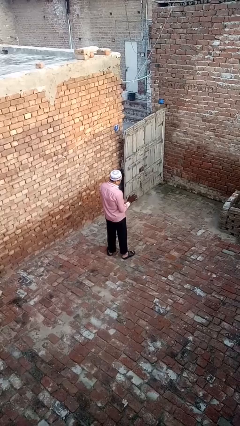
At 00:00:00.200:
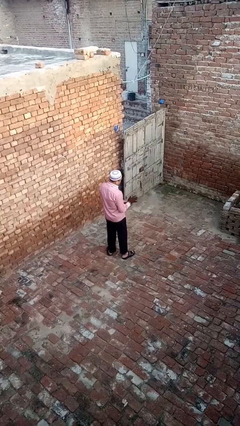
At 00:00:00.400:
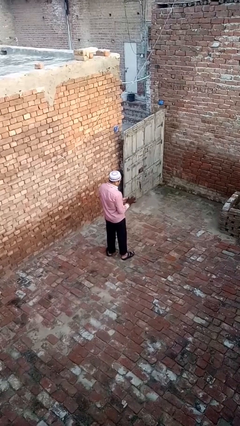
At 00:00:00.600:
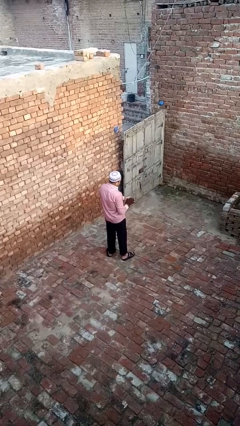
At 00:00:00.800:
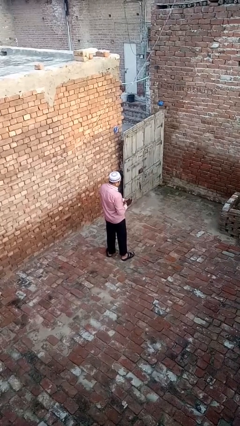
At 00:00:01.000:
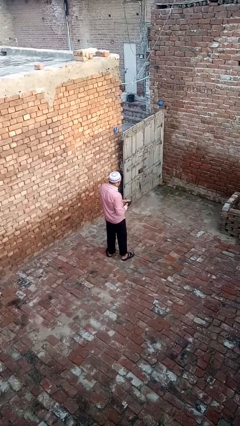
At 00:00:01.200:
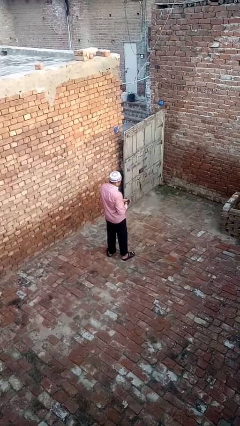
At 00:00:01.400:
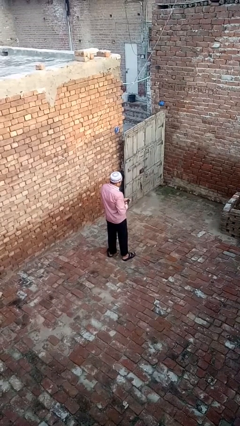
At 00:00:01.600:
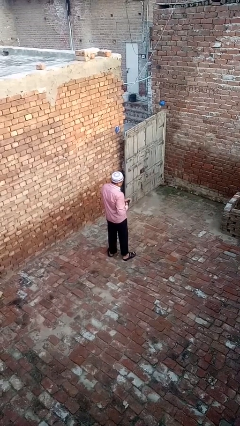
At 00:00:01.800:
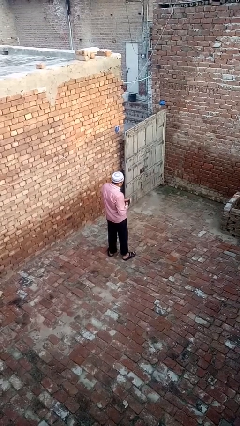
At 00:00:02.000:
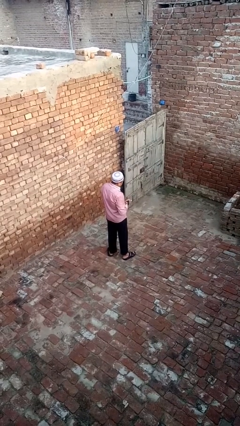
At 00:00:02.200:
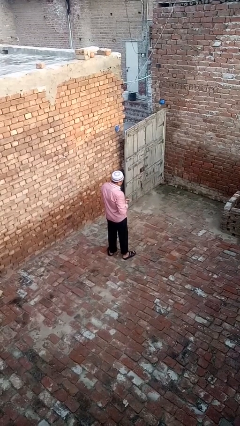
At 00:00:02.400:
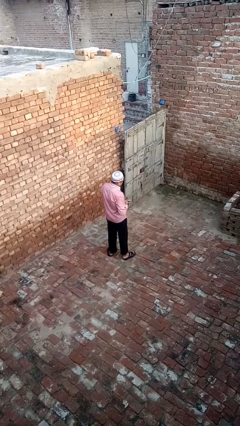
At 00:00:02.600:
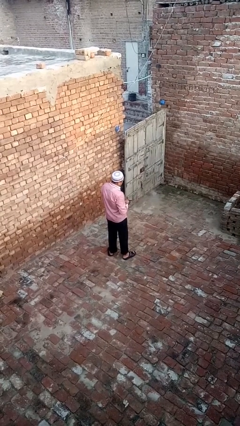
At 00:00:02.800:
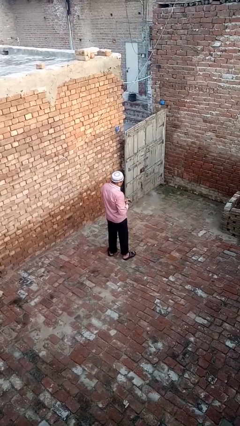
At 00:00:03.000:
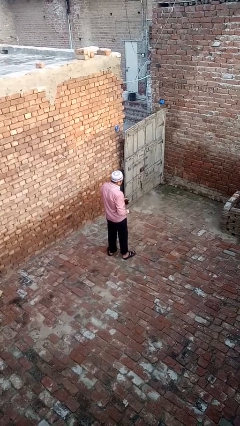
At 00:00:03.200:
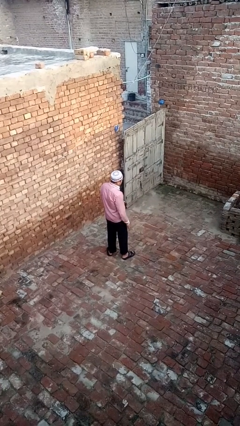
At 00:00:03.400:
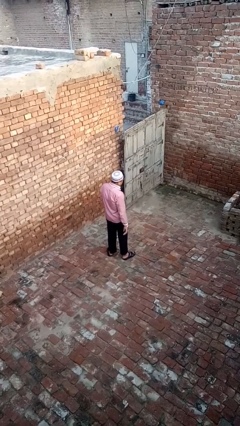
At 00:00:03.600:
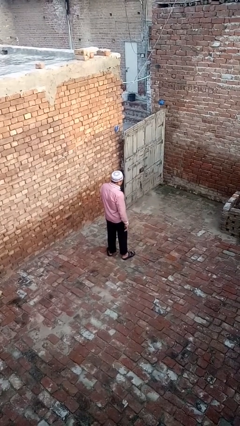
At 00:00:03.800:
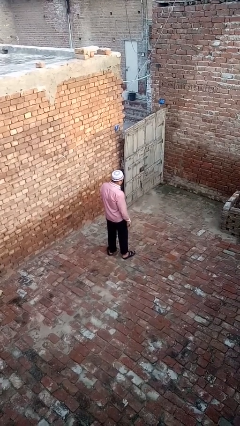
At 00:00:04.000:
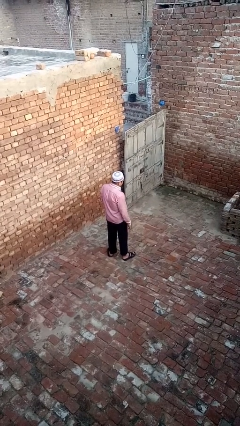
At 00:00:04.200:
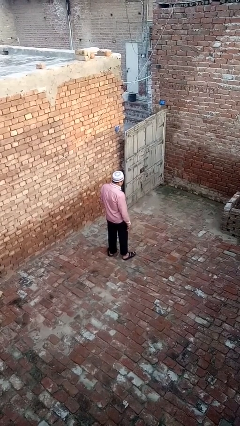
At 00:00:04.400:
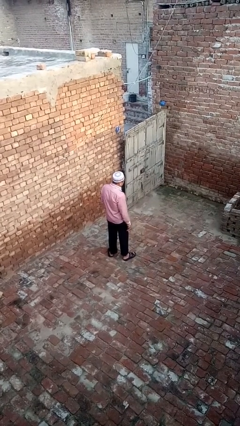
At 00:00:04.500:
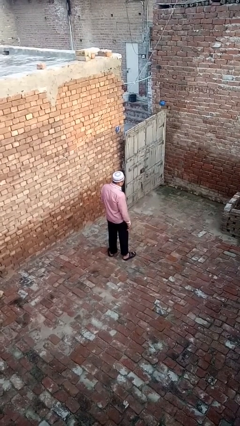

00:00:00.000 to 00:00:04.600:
person takes off gloves

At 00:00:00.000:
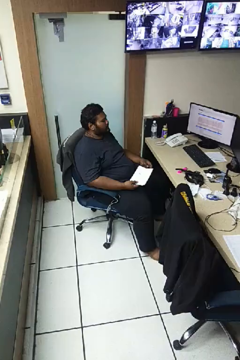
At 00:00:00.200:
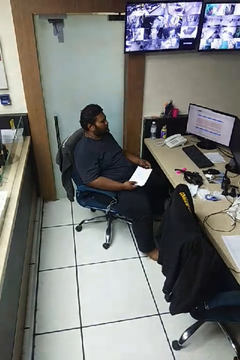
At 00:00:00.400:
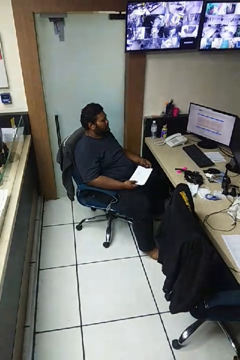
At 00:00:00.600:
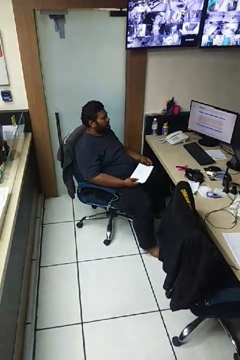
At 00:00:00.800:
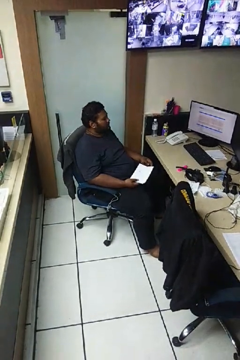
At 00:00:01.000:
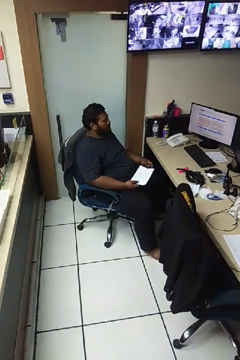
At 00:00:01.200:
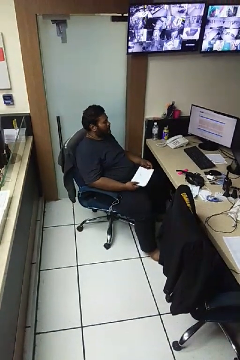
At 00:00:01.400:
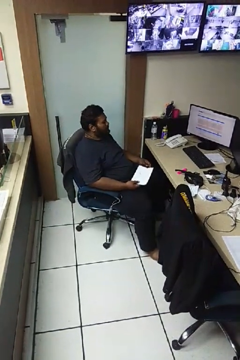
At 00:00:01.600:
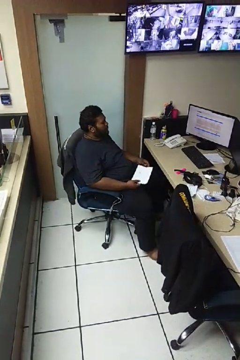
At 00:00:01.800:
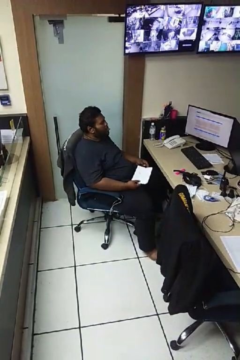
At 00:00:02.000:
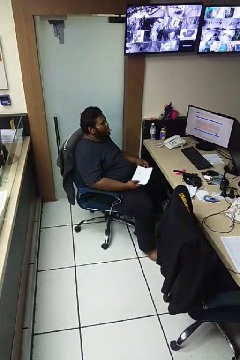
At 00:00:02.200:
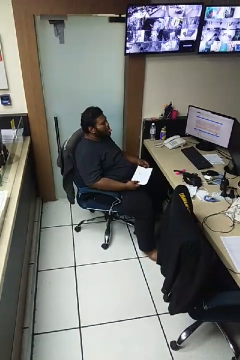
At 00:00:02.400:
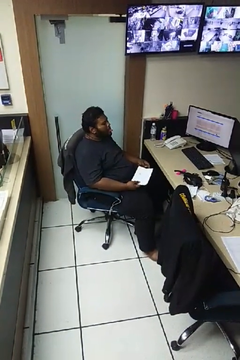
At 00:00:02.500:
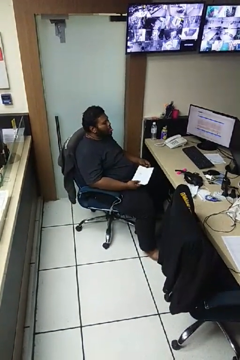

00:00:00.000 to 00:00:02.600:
person sticks out tongue

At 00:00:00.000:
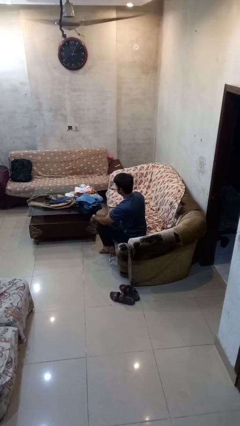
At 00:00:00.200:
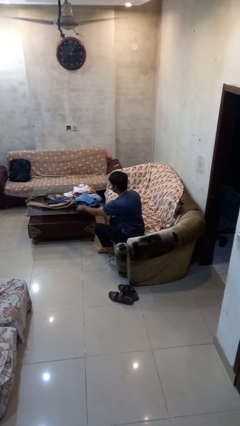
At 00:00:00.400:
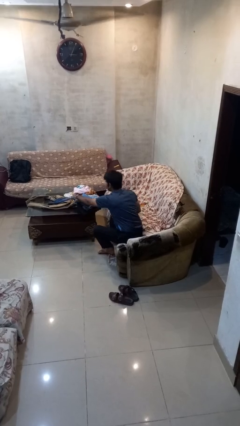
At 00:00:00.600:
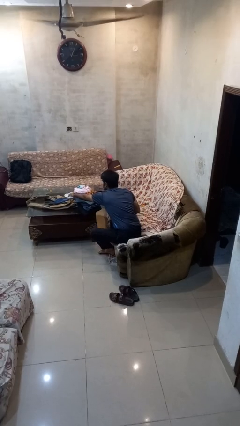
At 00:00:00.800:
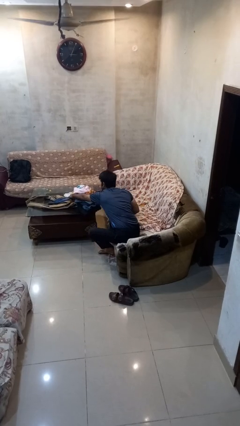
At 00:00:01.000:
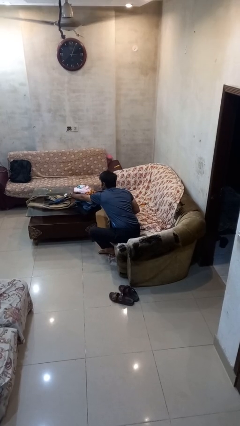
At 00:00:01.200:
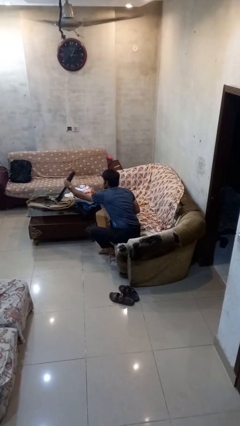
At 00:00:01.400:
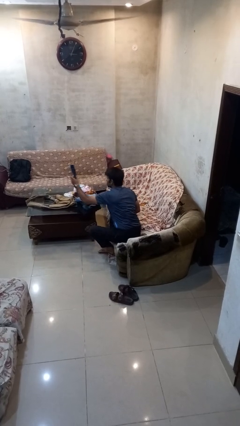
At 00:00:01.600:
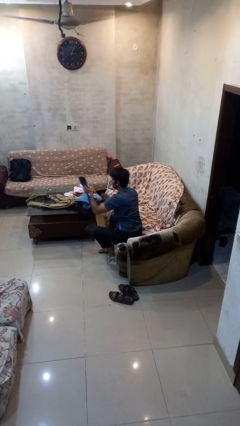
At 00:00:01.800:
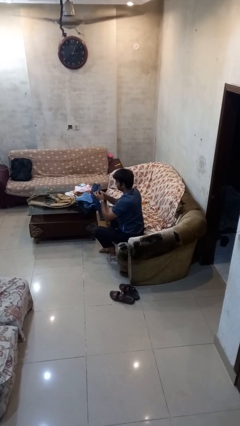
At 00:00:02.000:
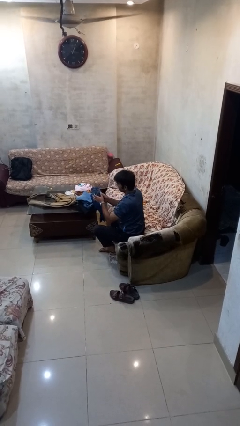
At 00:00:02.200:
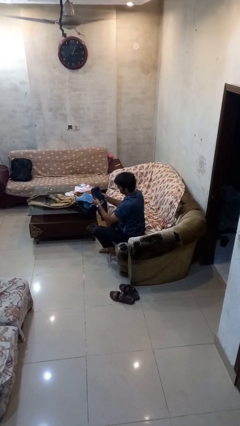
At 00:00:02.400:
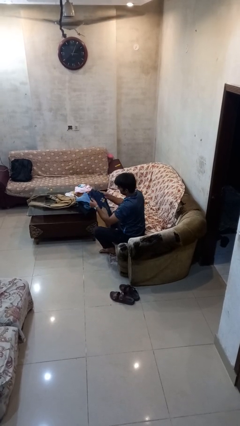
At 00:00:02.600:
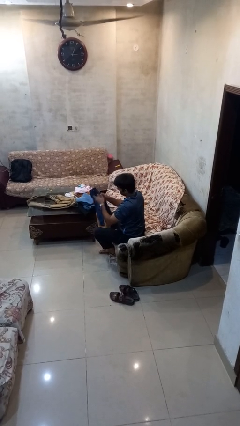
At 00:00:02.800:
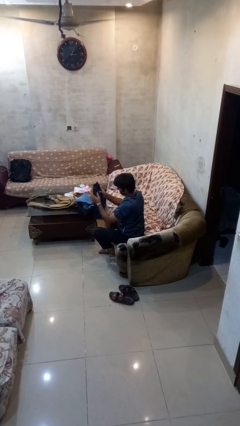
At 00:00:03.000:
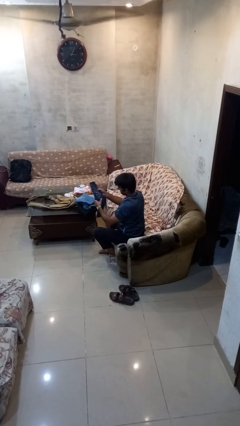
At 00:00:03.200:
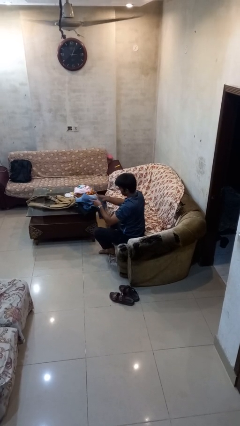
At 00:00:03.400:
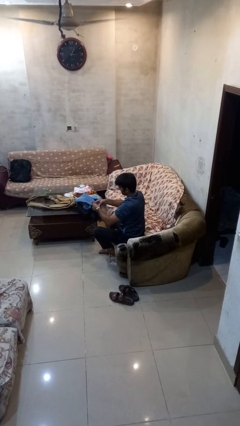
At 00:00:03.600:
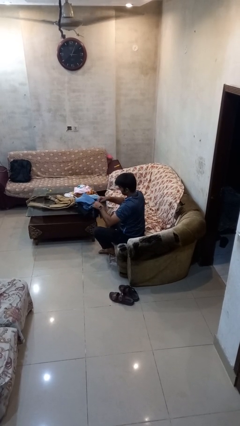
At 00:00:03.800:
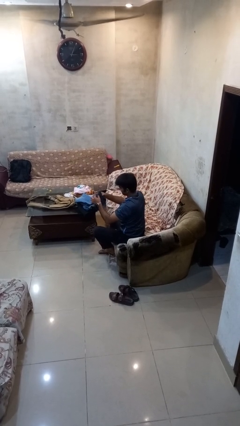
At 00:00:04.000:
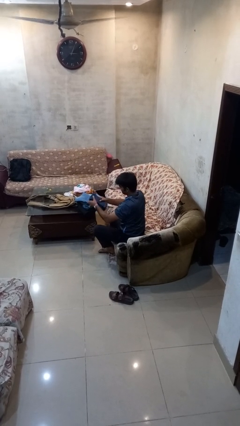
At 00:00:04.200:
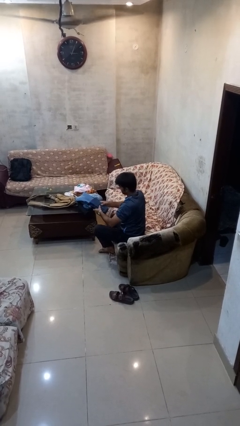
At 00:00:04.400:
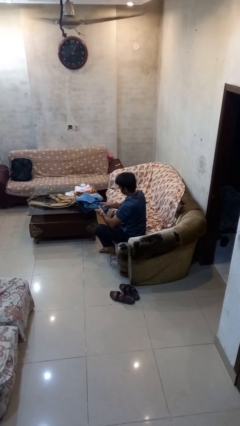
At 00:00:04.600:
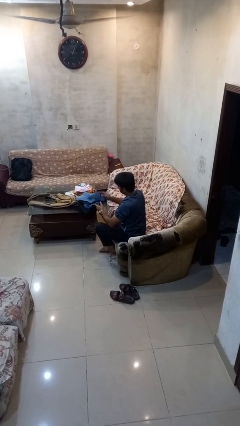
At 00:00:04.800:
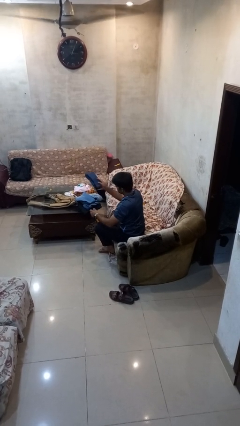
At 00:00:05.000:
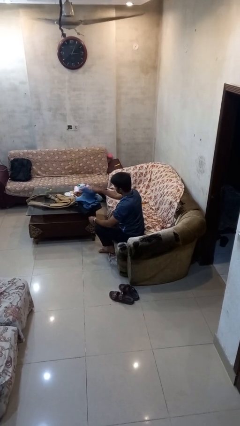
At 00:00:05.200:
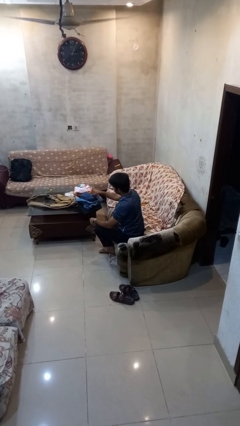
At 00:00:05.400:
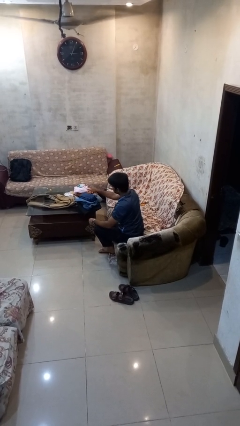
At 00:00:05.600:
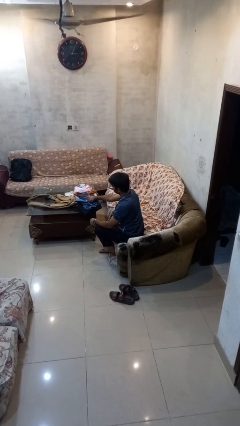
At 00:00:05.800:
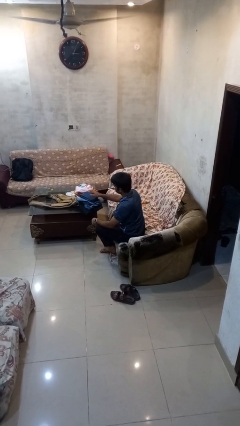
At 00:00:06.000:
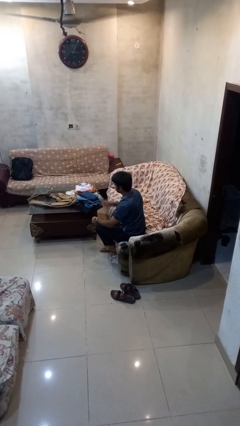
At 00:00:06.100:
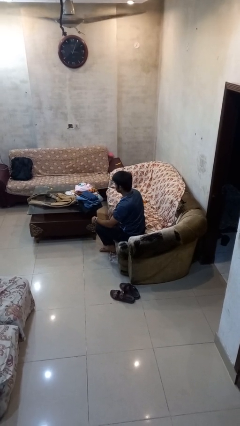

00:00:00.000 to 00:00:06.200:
person folds pants

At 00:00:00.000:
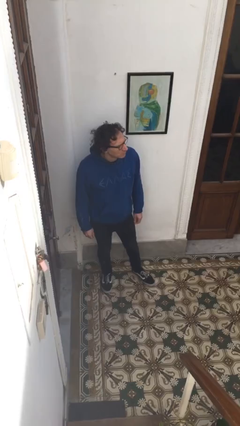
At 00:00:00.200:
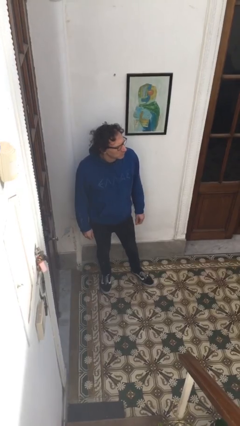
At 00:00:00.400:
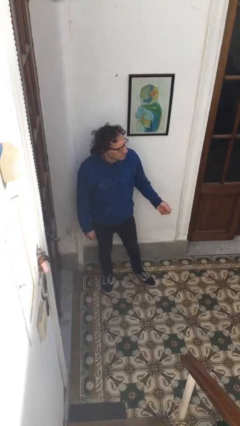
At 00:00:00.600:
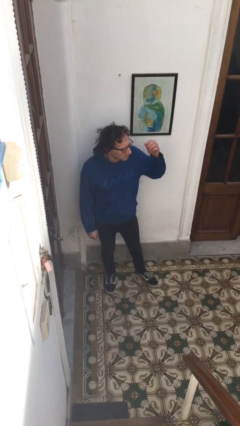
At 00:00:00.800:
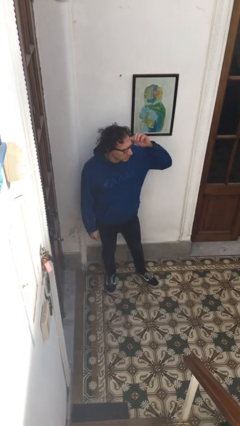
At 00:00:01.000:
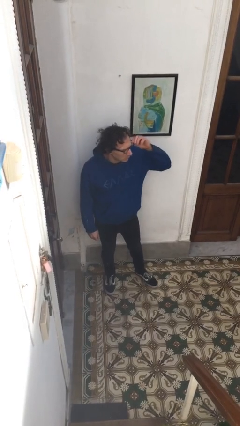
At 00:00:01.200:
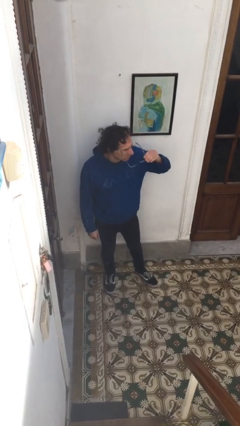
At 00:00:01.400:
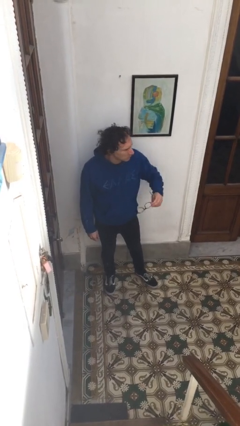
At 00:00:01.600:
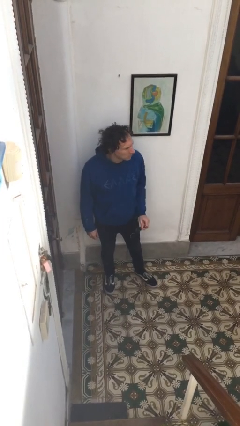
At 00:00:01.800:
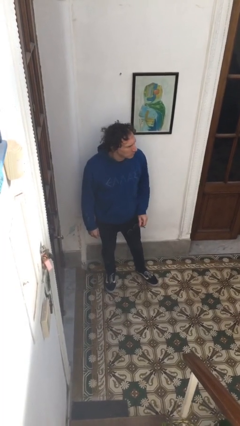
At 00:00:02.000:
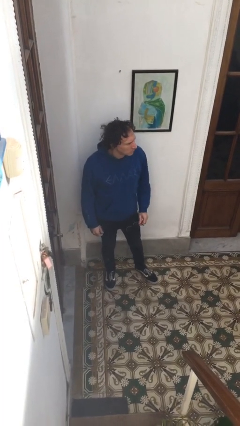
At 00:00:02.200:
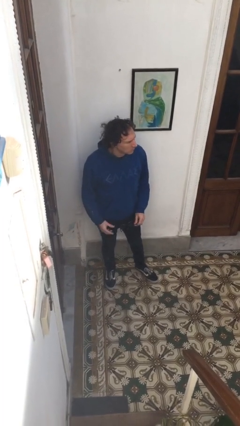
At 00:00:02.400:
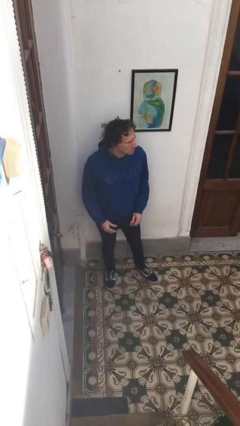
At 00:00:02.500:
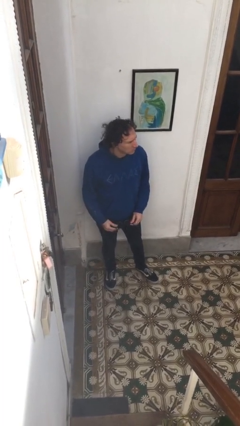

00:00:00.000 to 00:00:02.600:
person takes off glasses

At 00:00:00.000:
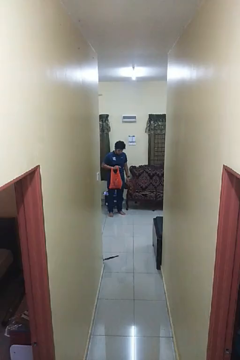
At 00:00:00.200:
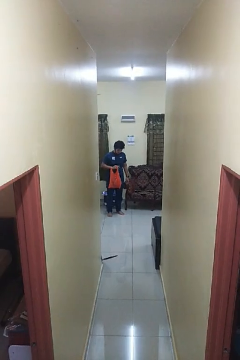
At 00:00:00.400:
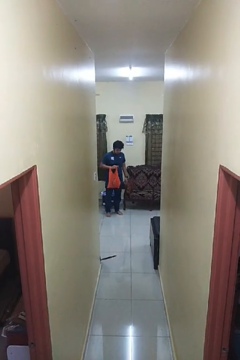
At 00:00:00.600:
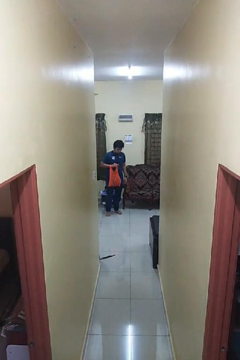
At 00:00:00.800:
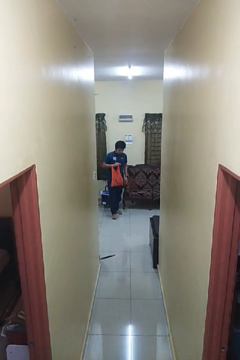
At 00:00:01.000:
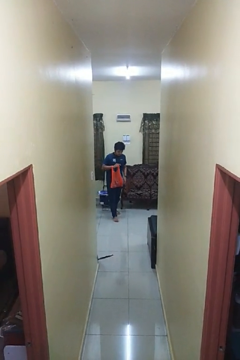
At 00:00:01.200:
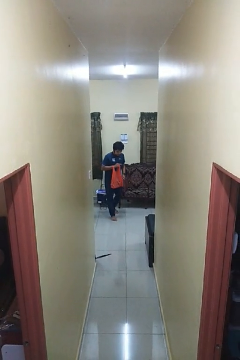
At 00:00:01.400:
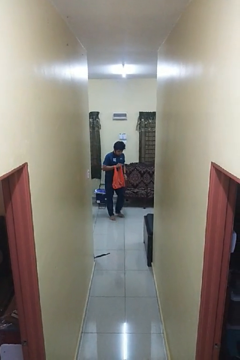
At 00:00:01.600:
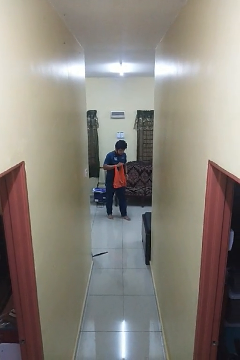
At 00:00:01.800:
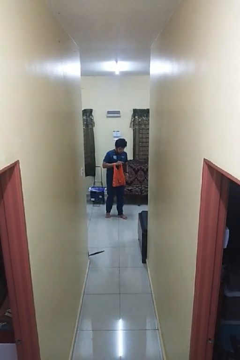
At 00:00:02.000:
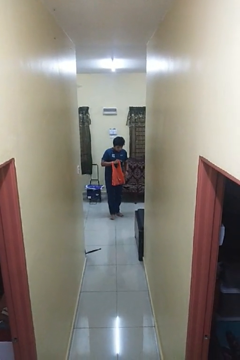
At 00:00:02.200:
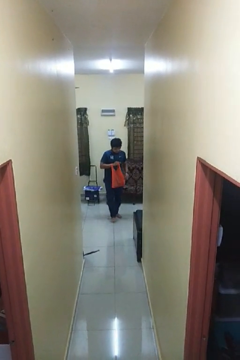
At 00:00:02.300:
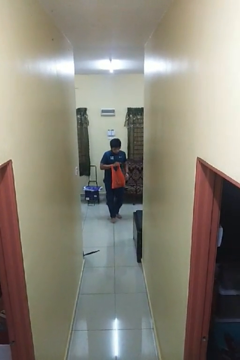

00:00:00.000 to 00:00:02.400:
person carries groceries
